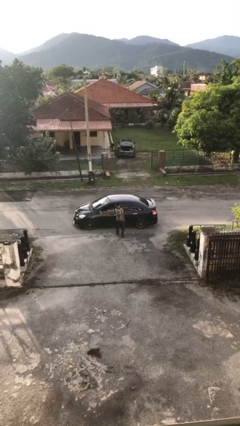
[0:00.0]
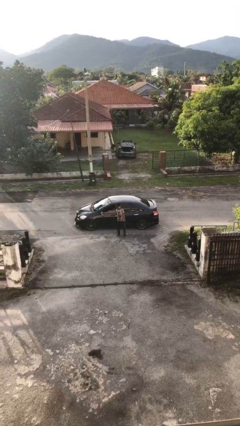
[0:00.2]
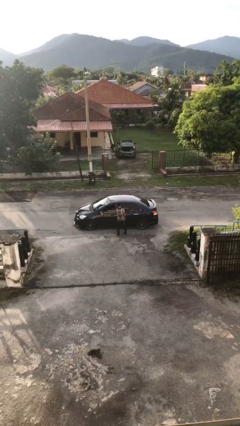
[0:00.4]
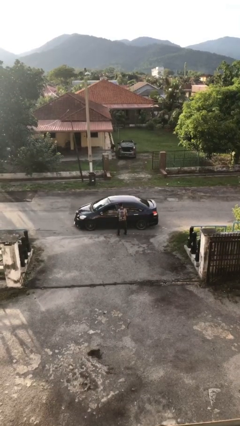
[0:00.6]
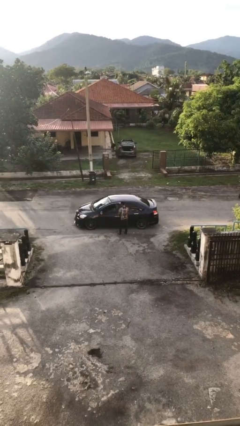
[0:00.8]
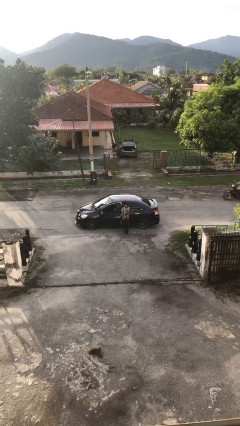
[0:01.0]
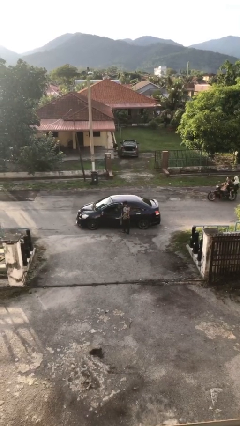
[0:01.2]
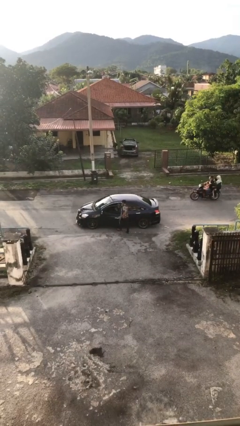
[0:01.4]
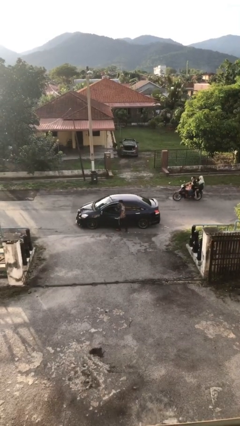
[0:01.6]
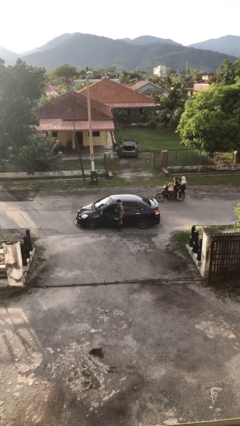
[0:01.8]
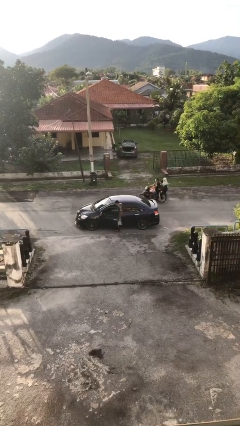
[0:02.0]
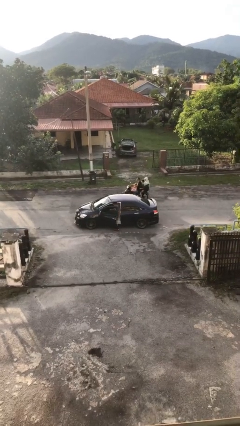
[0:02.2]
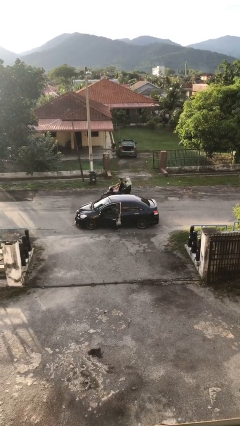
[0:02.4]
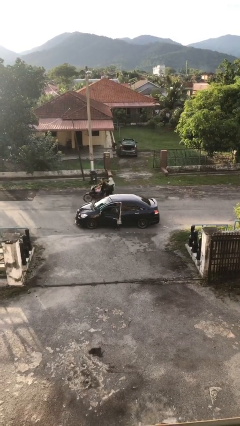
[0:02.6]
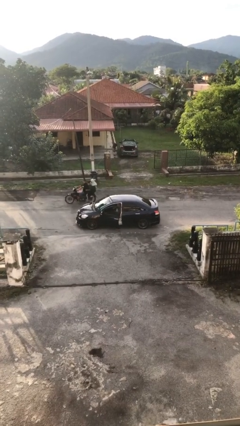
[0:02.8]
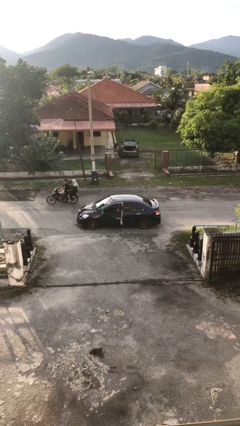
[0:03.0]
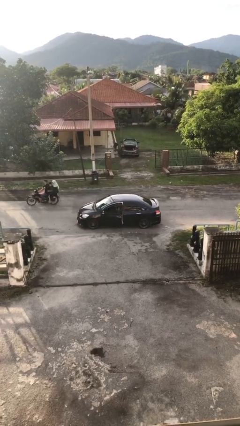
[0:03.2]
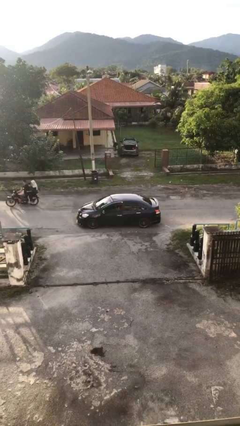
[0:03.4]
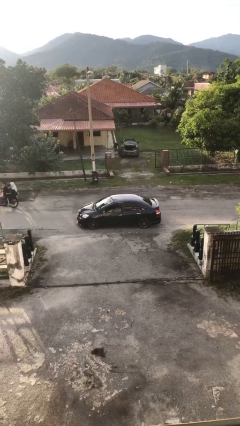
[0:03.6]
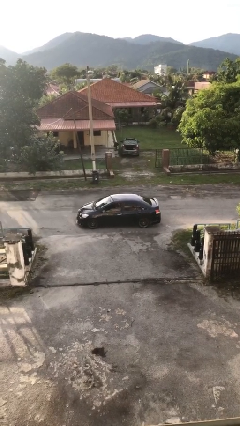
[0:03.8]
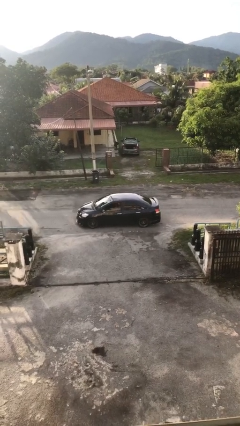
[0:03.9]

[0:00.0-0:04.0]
car picks up person

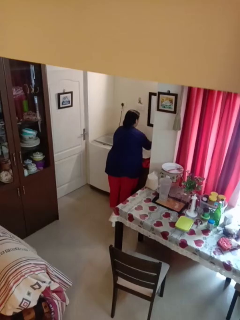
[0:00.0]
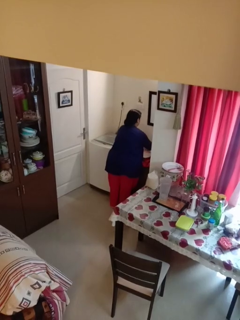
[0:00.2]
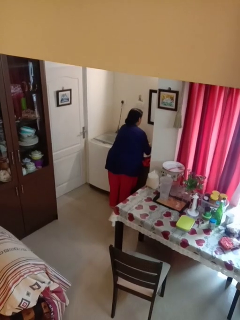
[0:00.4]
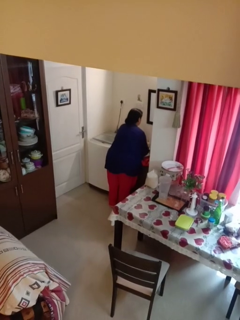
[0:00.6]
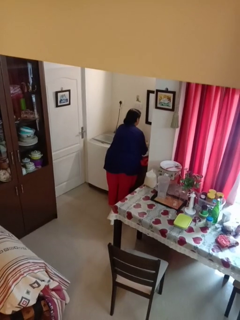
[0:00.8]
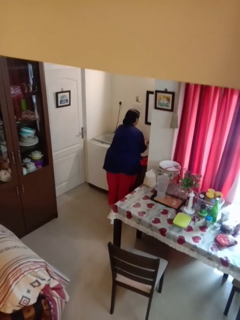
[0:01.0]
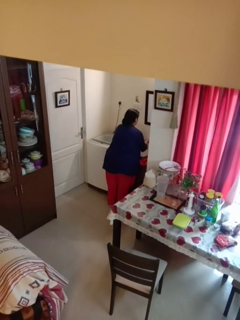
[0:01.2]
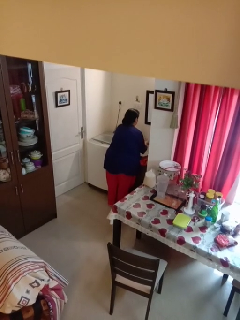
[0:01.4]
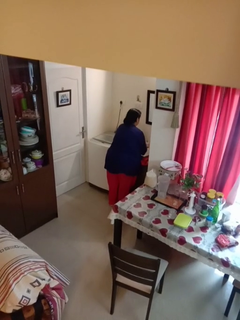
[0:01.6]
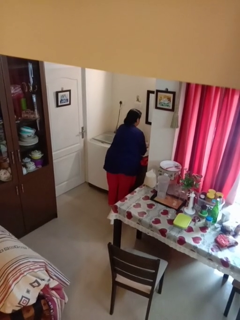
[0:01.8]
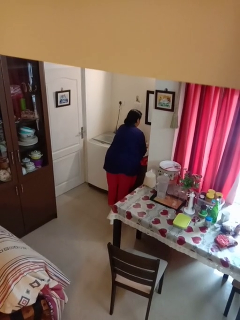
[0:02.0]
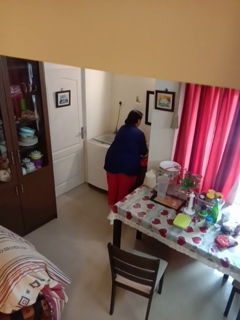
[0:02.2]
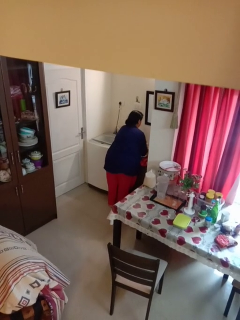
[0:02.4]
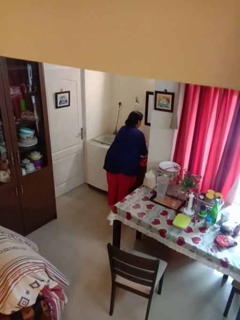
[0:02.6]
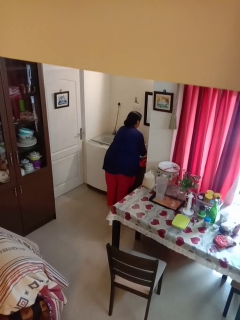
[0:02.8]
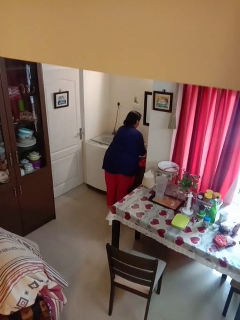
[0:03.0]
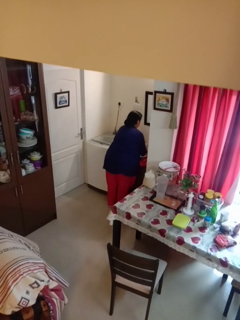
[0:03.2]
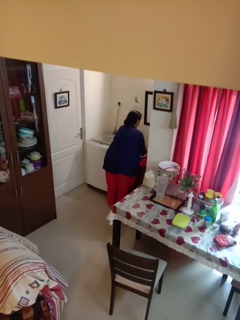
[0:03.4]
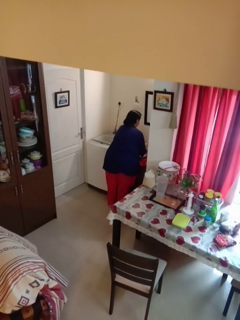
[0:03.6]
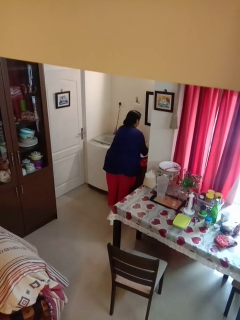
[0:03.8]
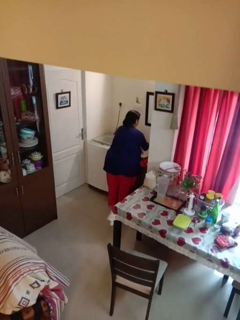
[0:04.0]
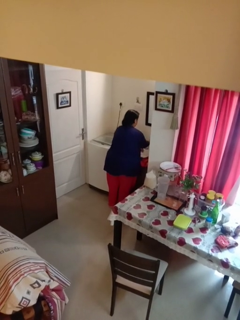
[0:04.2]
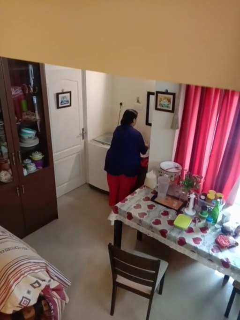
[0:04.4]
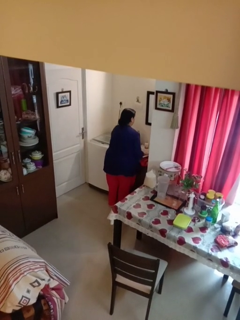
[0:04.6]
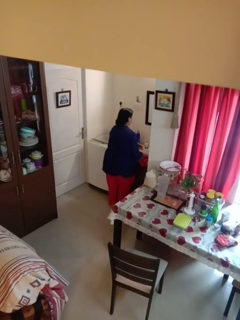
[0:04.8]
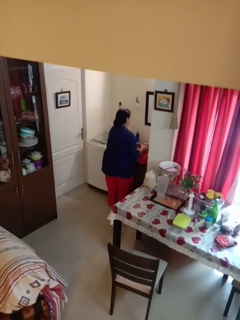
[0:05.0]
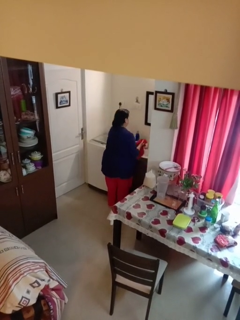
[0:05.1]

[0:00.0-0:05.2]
person washes hands

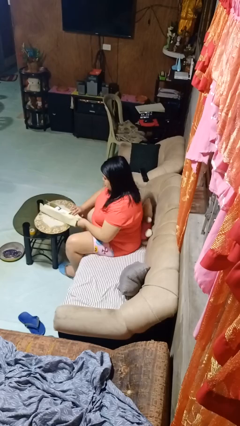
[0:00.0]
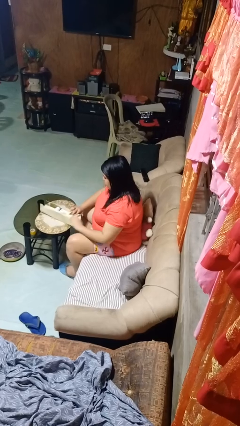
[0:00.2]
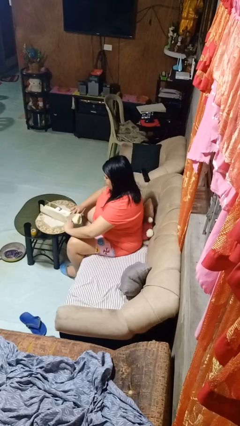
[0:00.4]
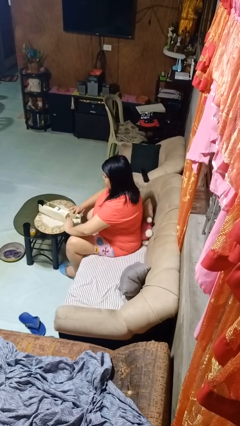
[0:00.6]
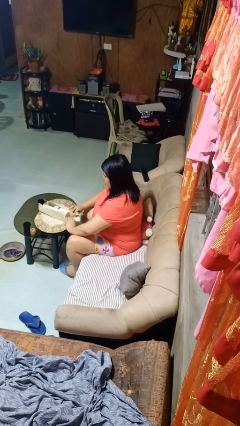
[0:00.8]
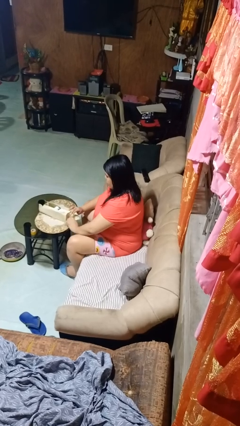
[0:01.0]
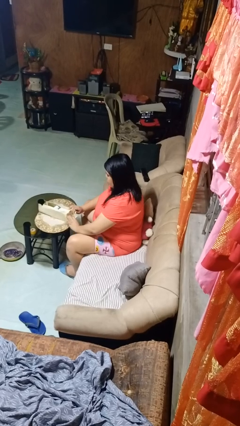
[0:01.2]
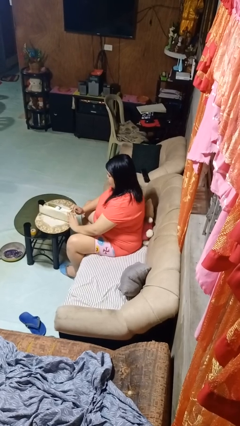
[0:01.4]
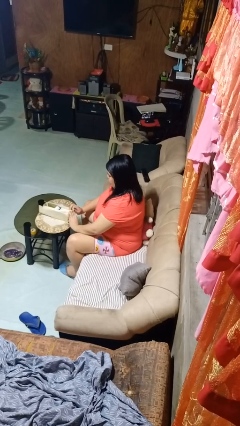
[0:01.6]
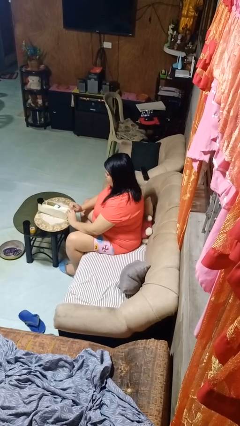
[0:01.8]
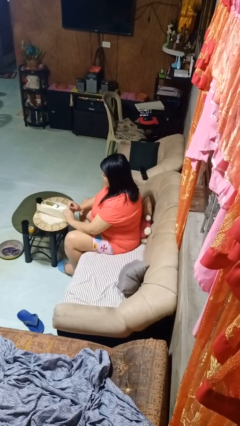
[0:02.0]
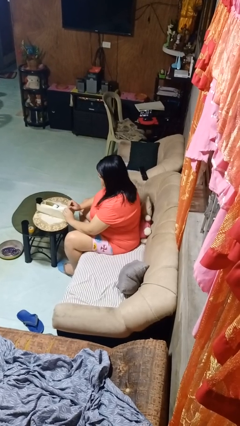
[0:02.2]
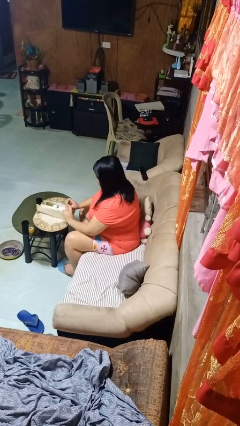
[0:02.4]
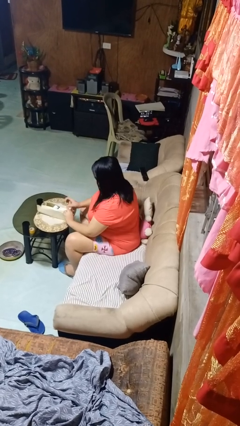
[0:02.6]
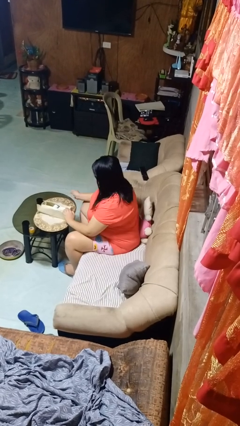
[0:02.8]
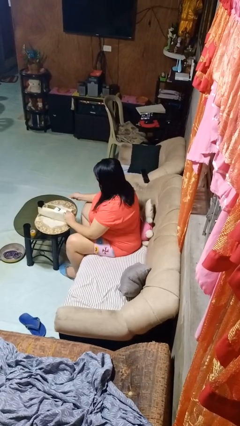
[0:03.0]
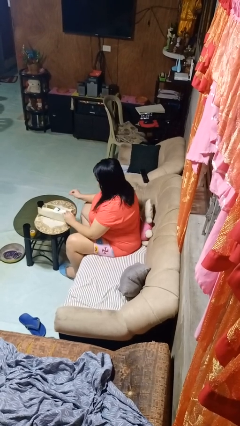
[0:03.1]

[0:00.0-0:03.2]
person wraps box

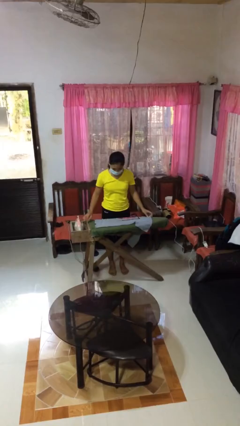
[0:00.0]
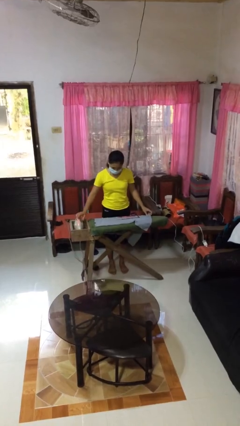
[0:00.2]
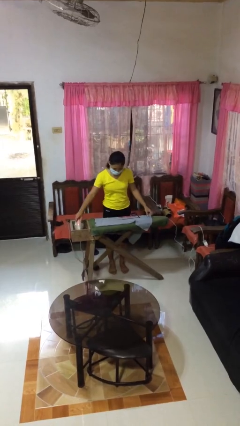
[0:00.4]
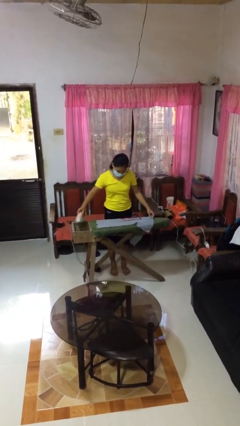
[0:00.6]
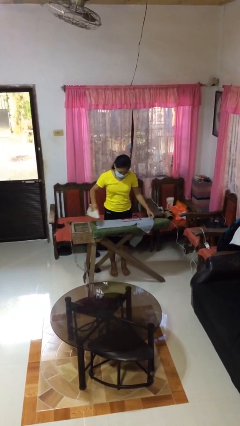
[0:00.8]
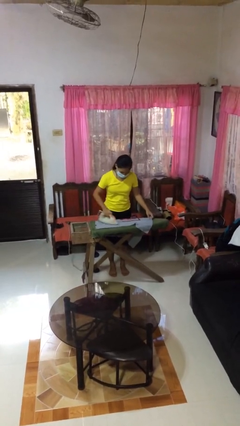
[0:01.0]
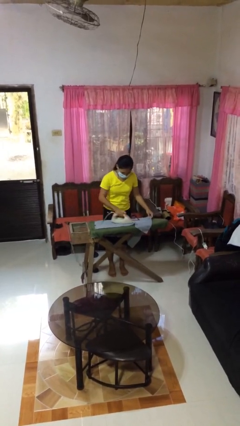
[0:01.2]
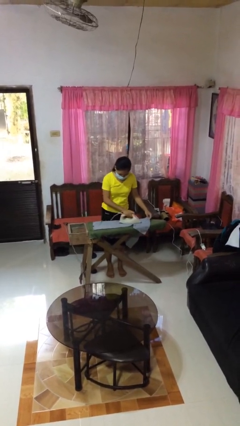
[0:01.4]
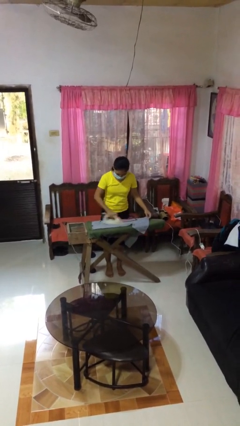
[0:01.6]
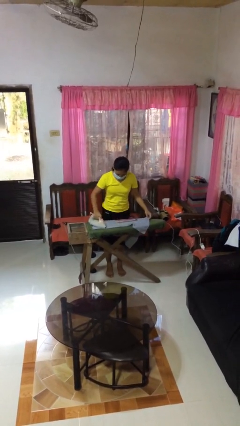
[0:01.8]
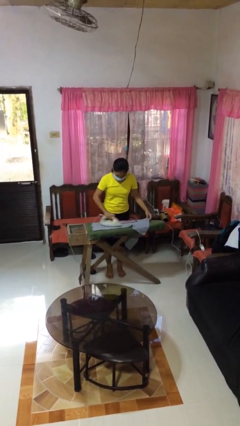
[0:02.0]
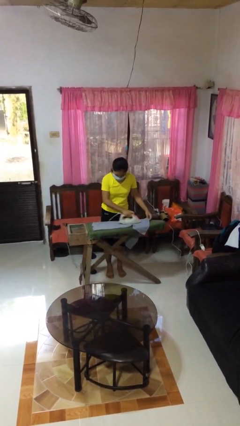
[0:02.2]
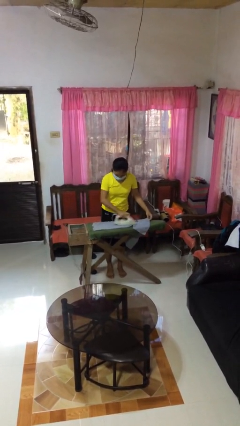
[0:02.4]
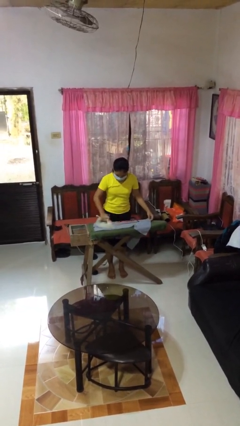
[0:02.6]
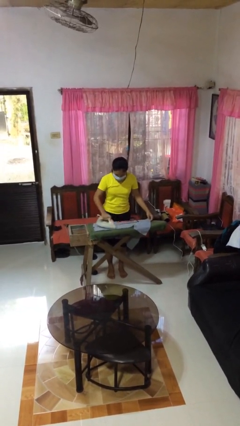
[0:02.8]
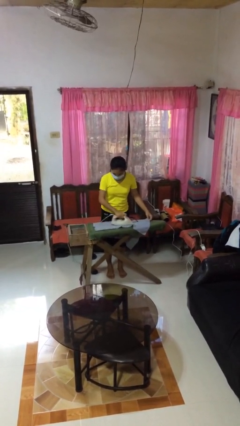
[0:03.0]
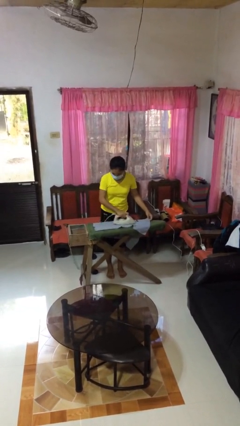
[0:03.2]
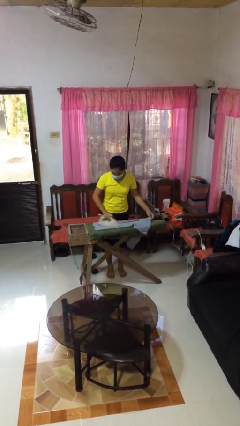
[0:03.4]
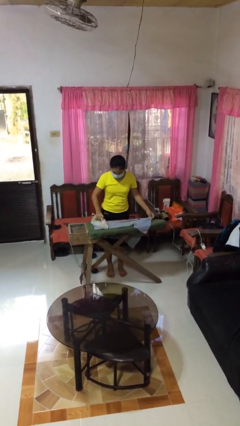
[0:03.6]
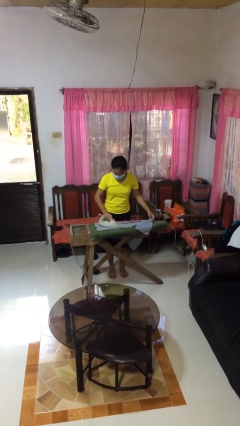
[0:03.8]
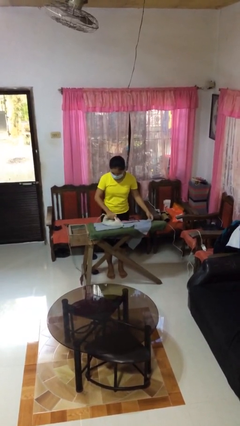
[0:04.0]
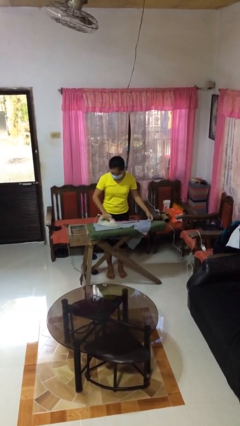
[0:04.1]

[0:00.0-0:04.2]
person irons clothes

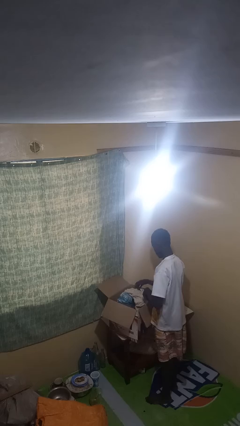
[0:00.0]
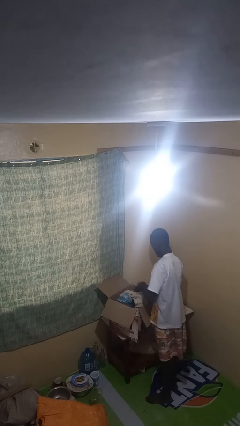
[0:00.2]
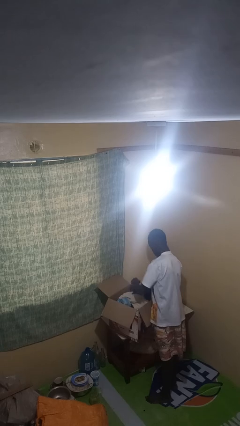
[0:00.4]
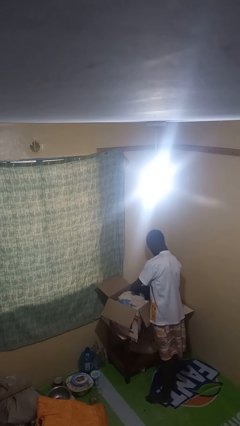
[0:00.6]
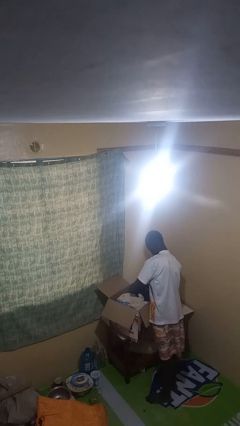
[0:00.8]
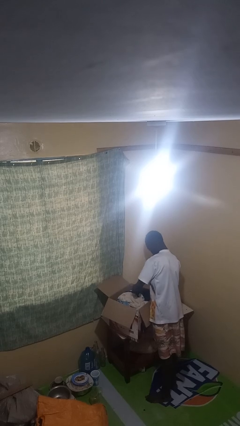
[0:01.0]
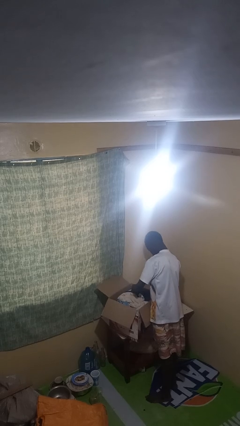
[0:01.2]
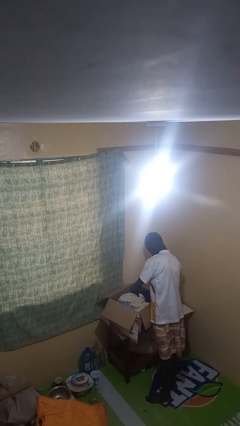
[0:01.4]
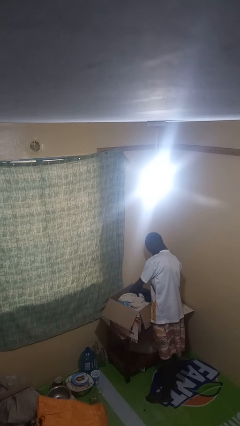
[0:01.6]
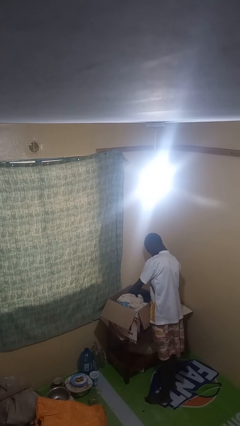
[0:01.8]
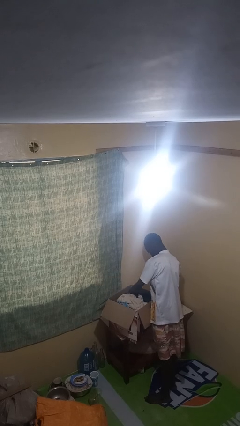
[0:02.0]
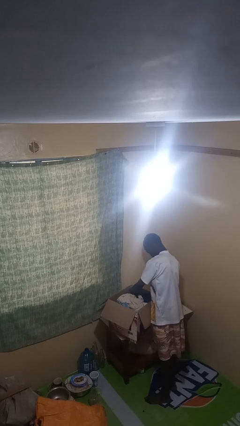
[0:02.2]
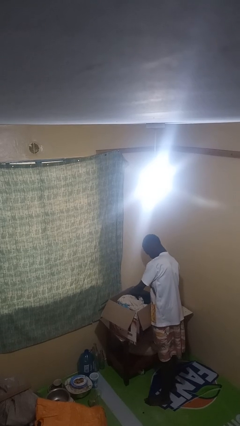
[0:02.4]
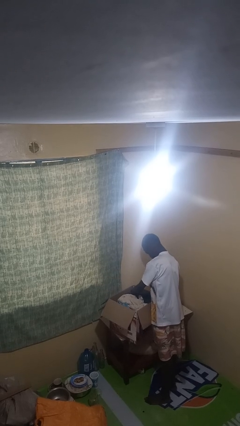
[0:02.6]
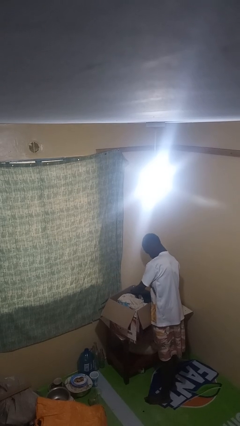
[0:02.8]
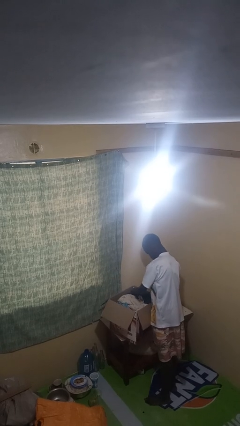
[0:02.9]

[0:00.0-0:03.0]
person searches in box
